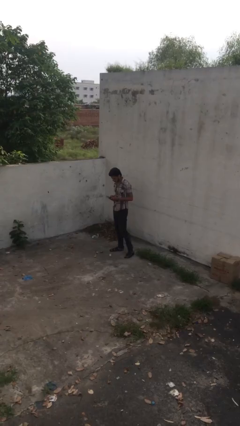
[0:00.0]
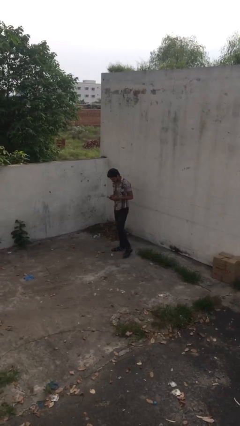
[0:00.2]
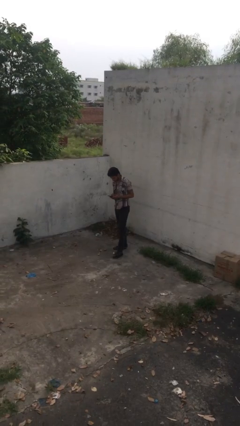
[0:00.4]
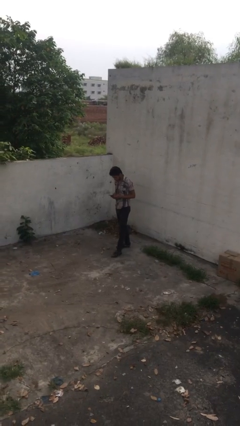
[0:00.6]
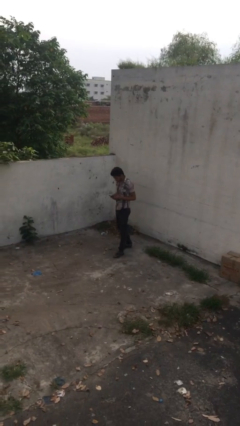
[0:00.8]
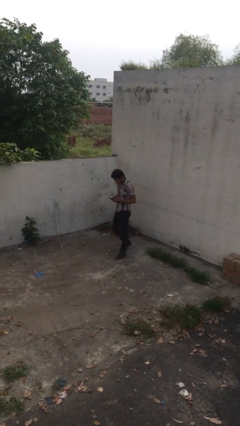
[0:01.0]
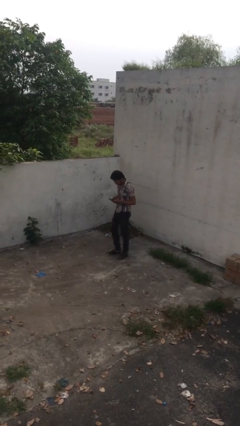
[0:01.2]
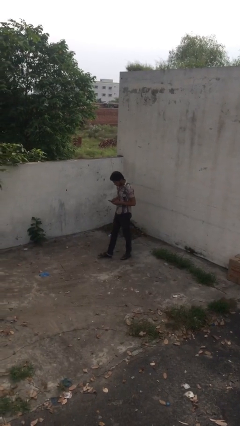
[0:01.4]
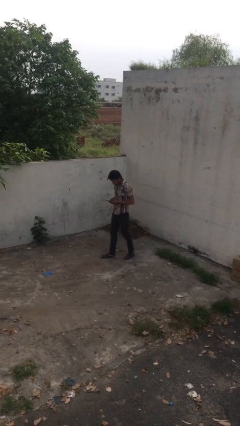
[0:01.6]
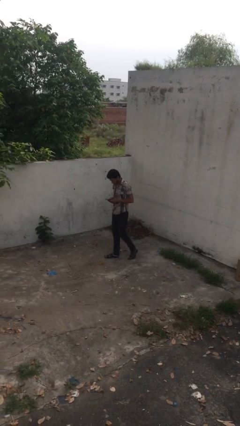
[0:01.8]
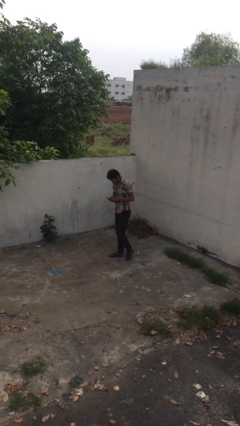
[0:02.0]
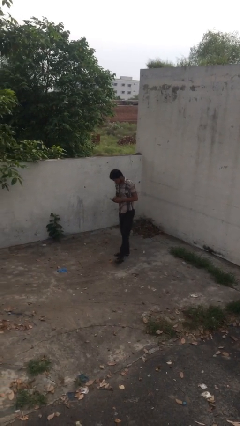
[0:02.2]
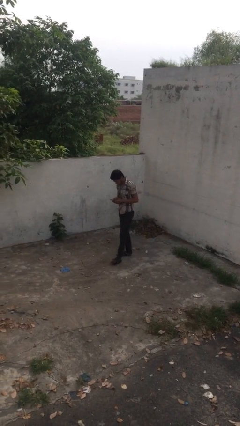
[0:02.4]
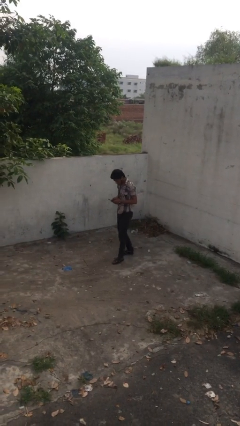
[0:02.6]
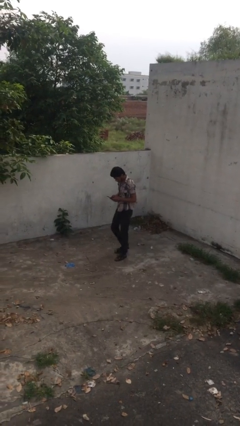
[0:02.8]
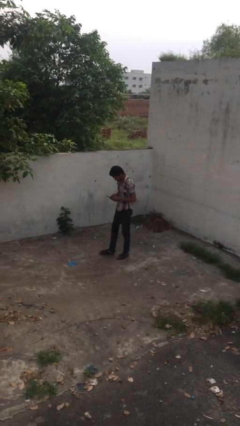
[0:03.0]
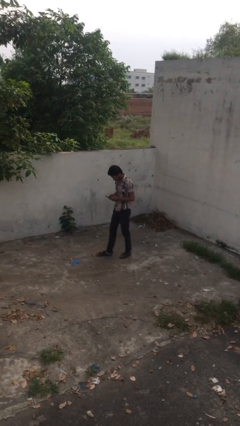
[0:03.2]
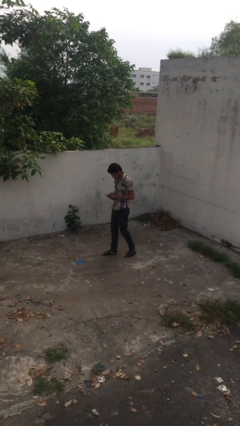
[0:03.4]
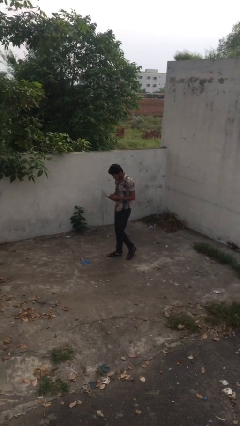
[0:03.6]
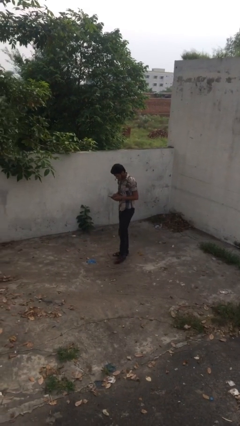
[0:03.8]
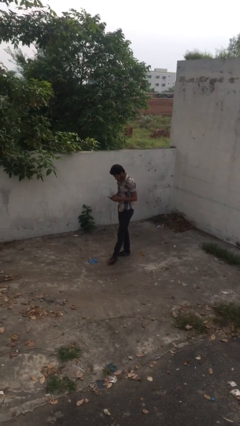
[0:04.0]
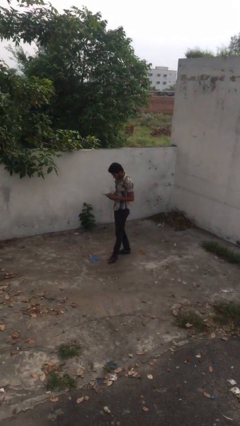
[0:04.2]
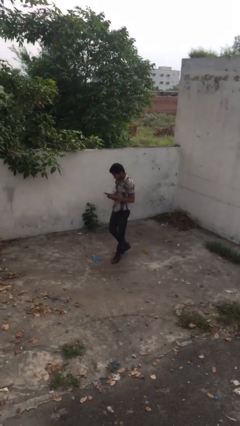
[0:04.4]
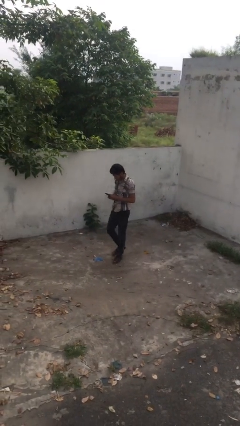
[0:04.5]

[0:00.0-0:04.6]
person texts on phone

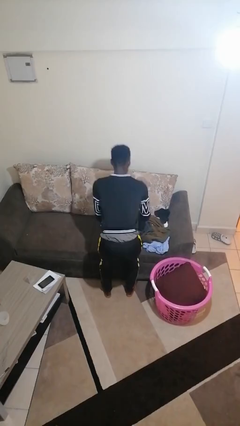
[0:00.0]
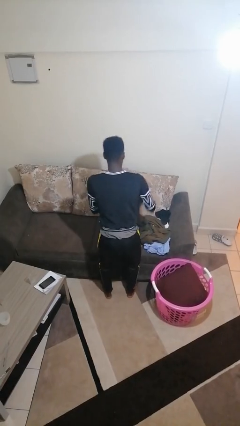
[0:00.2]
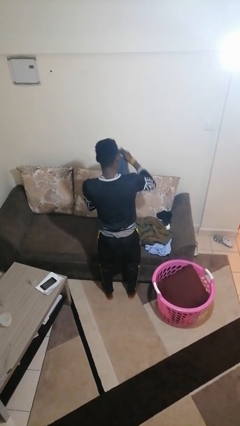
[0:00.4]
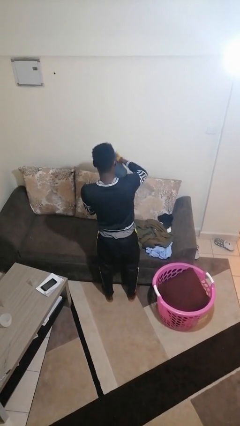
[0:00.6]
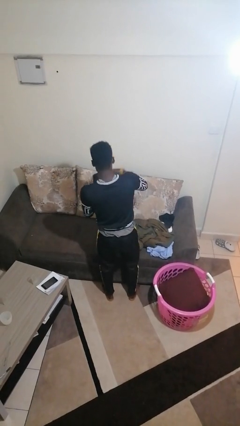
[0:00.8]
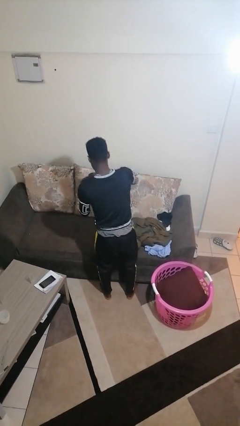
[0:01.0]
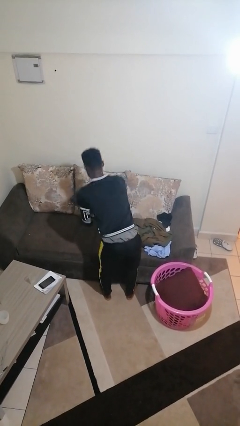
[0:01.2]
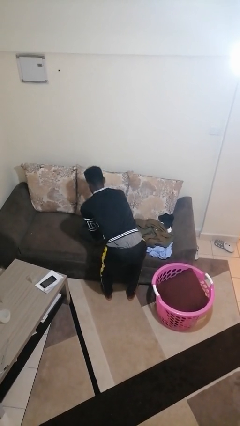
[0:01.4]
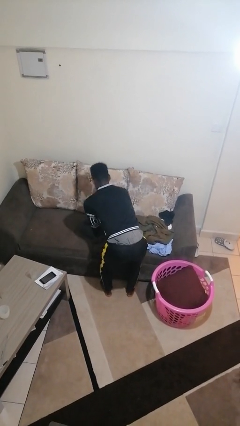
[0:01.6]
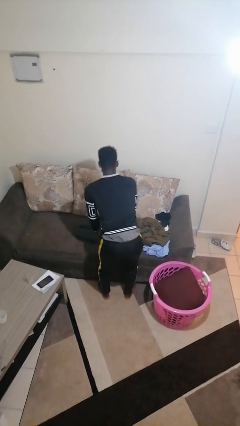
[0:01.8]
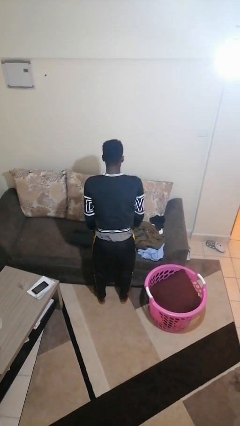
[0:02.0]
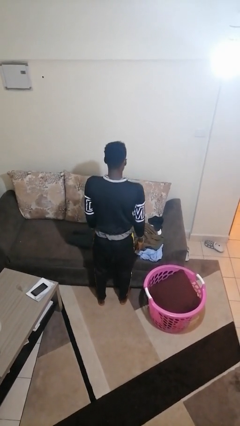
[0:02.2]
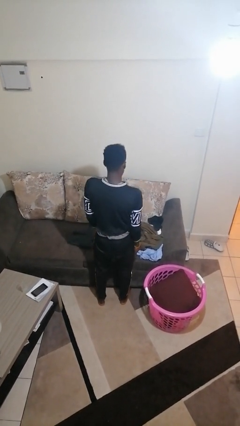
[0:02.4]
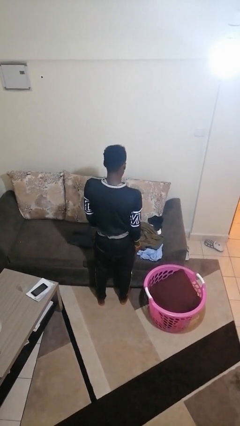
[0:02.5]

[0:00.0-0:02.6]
person folds pants

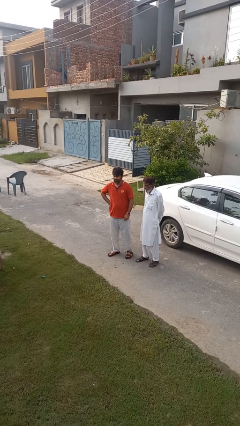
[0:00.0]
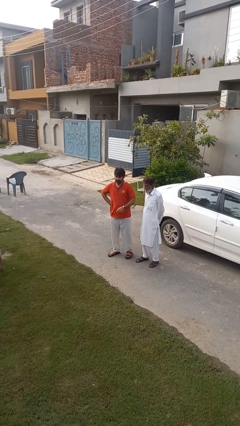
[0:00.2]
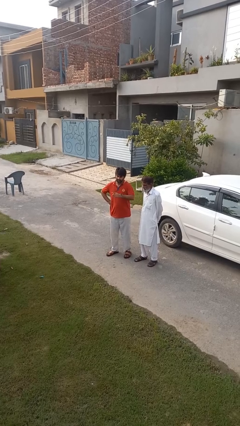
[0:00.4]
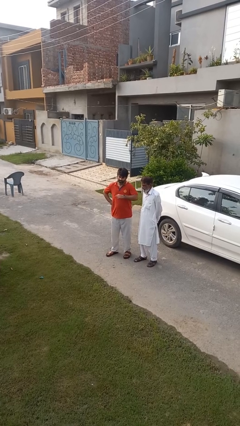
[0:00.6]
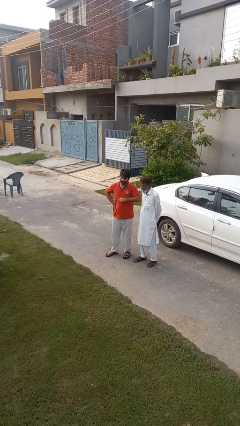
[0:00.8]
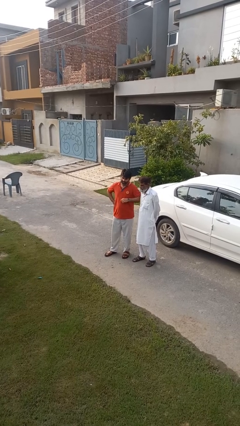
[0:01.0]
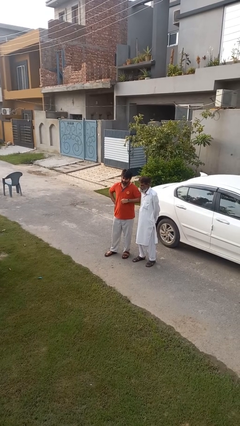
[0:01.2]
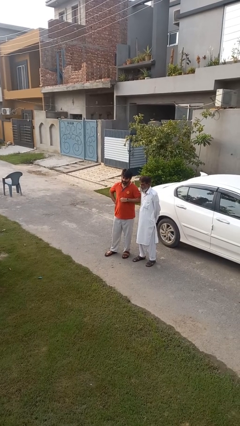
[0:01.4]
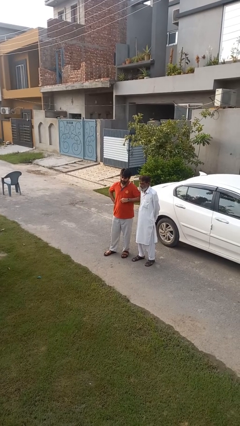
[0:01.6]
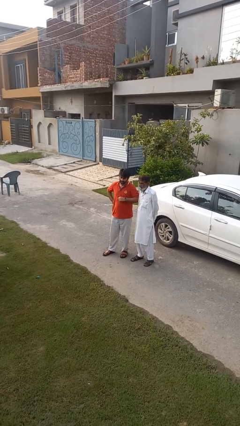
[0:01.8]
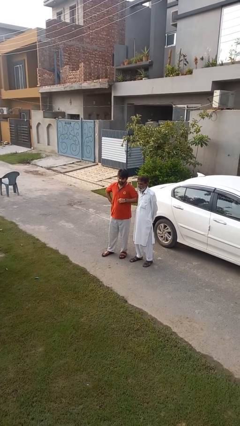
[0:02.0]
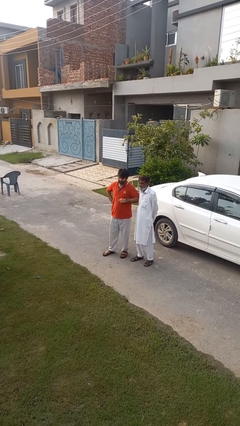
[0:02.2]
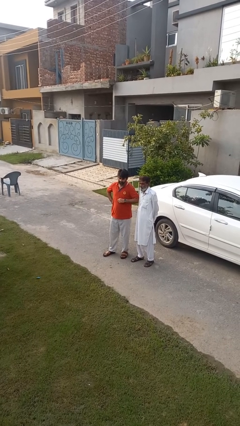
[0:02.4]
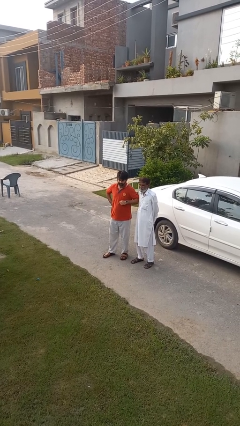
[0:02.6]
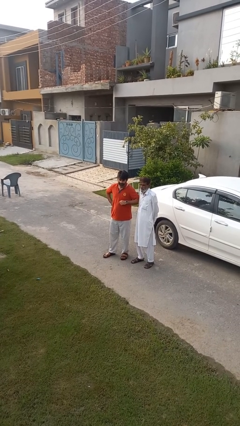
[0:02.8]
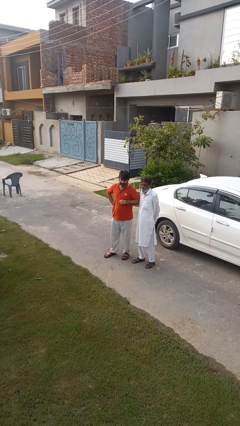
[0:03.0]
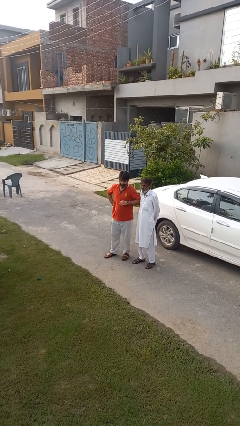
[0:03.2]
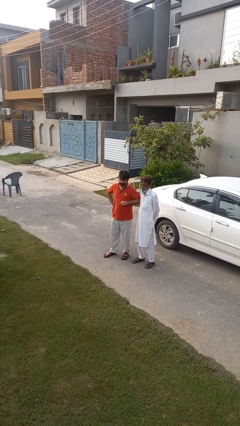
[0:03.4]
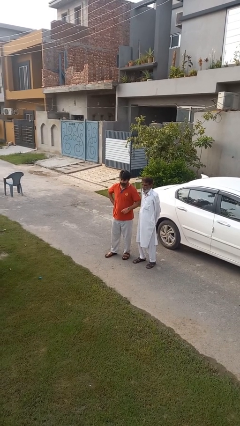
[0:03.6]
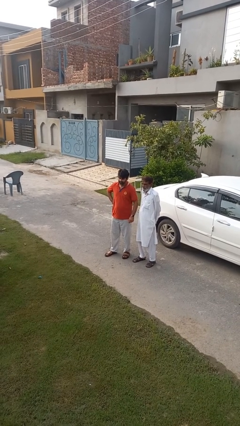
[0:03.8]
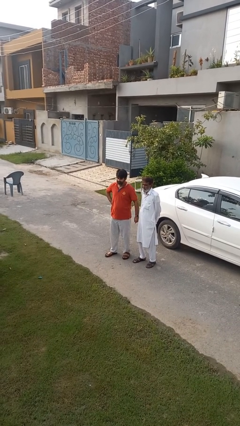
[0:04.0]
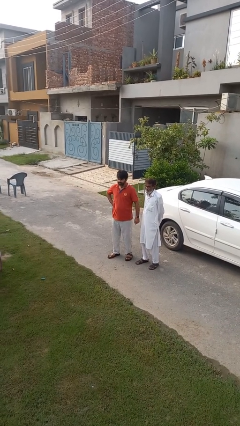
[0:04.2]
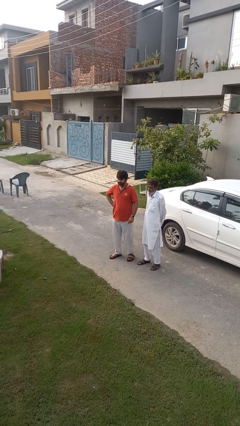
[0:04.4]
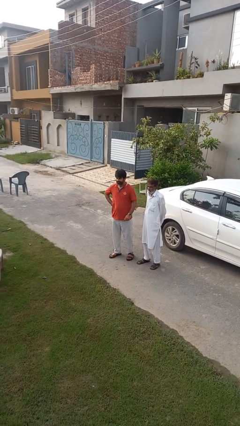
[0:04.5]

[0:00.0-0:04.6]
person nudges person with elbow

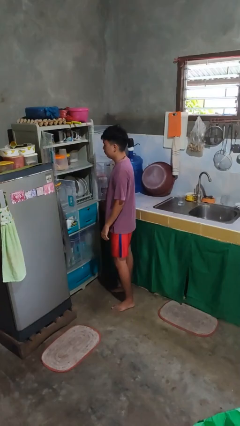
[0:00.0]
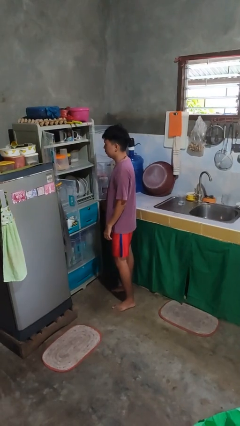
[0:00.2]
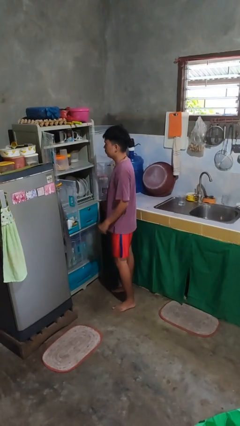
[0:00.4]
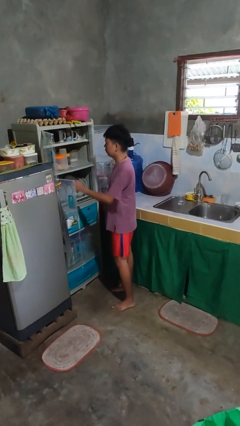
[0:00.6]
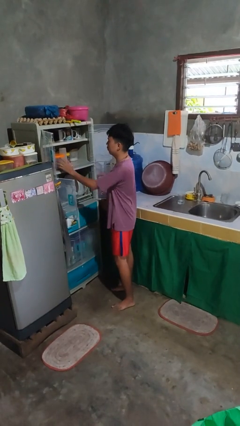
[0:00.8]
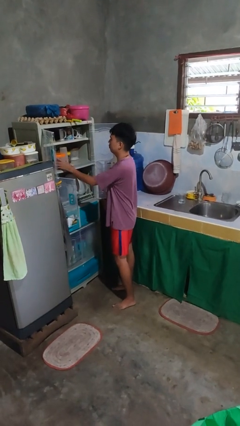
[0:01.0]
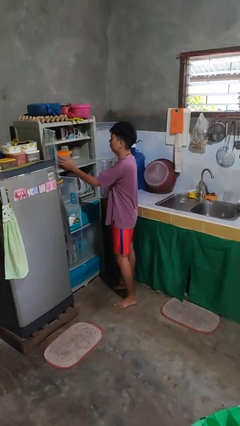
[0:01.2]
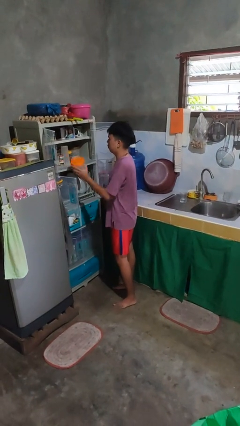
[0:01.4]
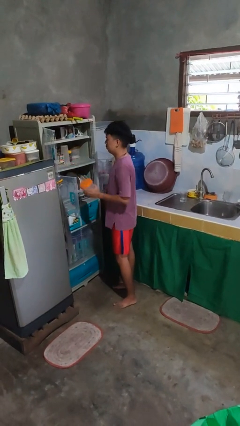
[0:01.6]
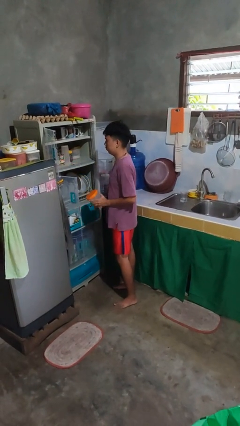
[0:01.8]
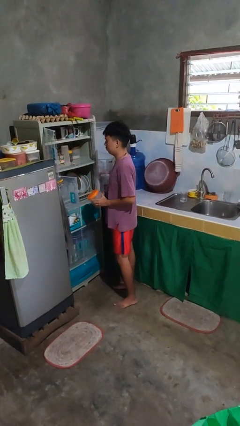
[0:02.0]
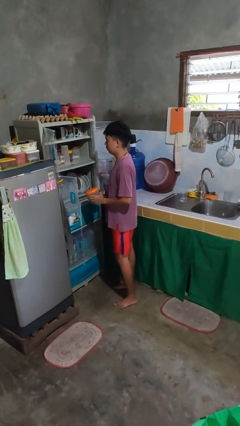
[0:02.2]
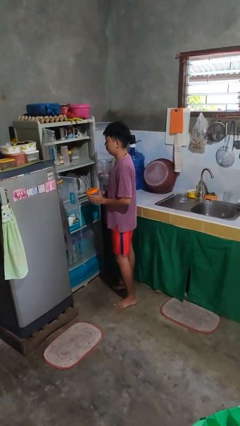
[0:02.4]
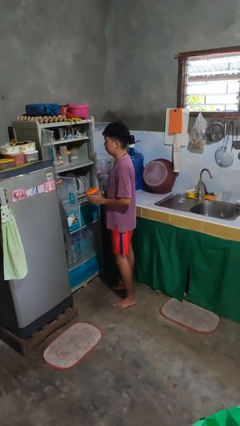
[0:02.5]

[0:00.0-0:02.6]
person takes object from cabinet

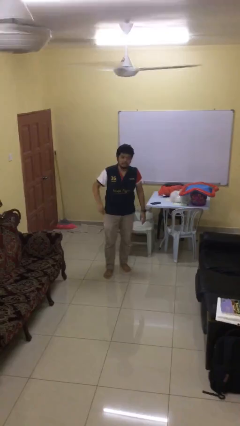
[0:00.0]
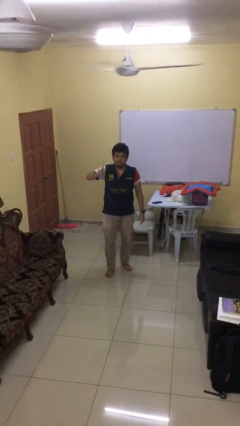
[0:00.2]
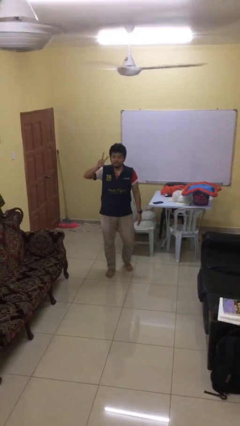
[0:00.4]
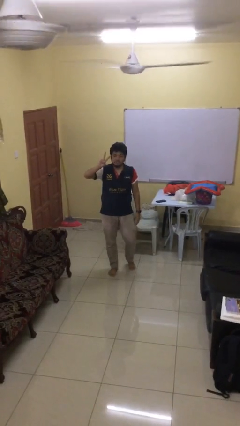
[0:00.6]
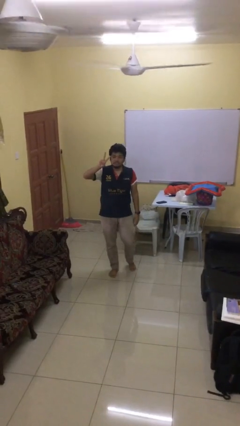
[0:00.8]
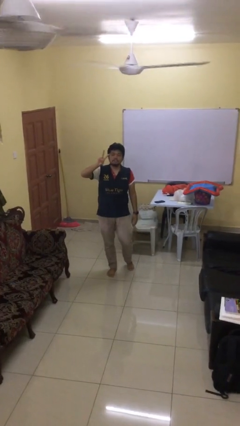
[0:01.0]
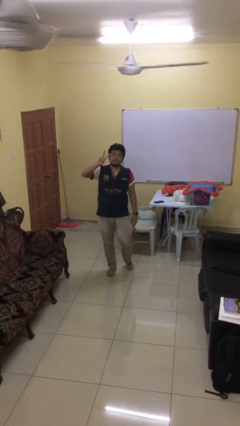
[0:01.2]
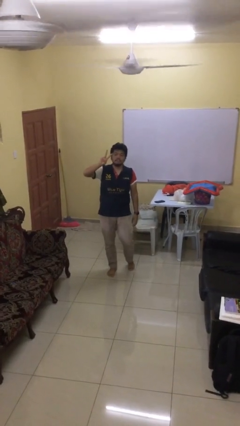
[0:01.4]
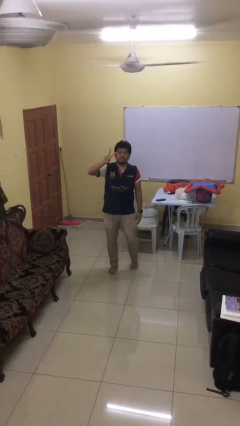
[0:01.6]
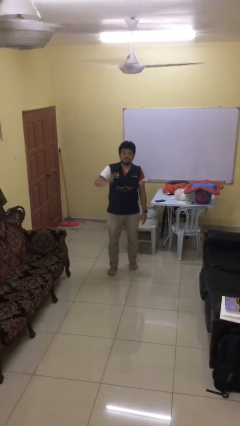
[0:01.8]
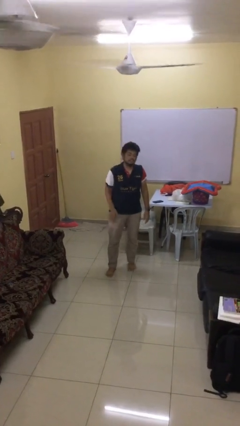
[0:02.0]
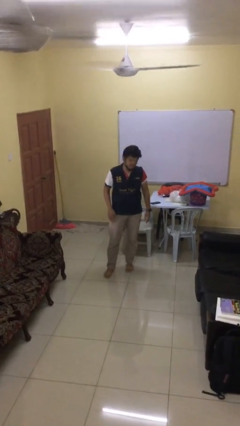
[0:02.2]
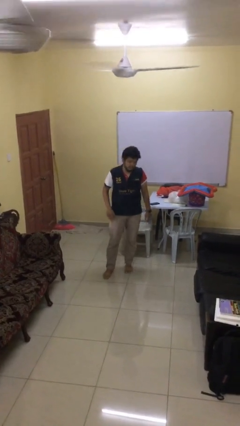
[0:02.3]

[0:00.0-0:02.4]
person gestures peace

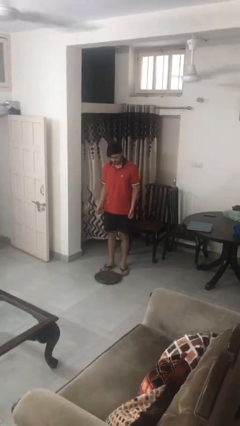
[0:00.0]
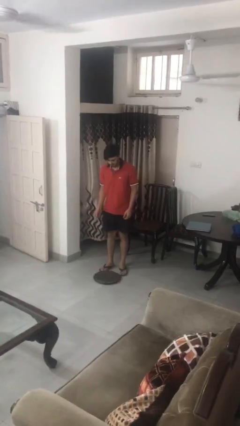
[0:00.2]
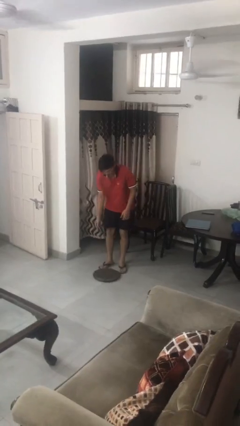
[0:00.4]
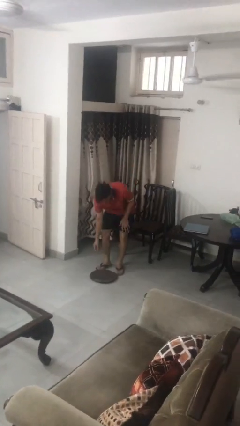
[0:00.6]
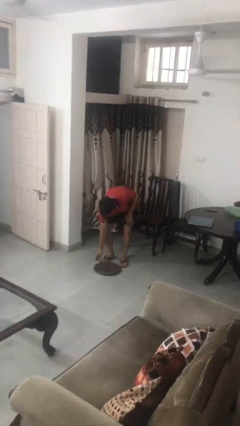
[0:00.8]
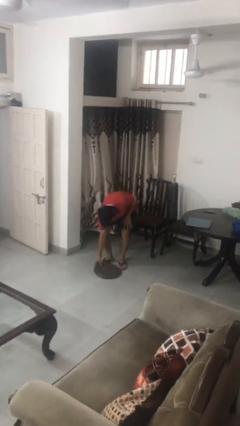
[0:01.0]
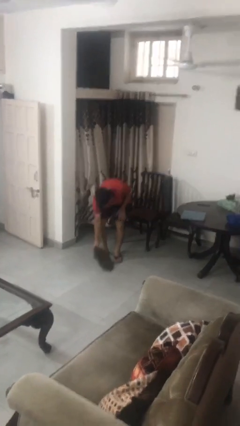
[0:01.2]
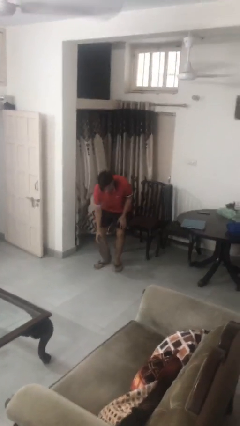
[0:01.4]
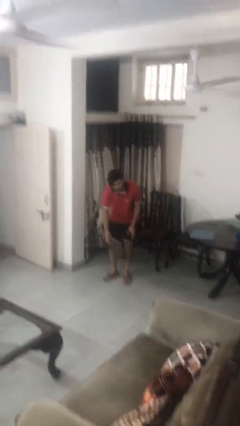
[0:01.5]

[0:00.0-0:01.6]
person picks up object from floor
